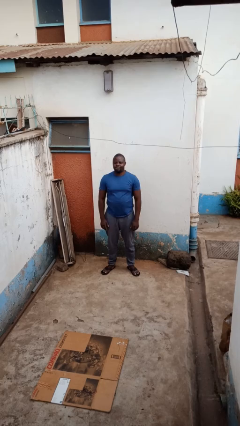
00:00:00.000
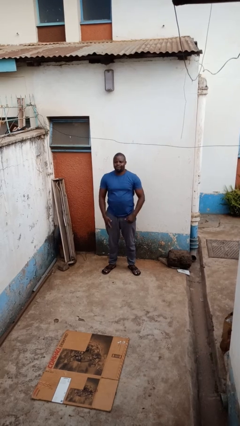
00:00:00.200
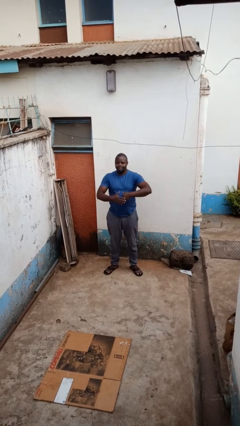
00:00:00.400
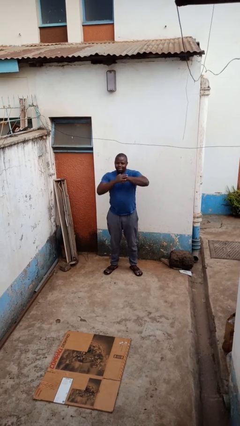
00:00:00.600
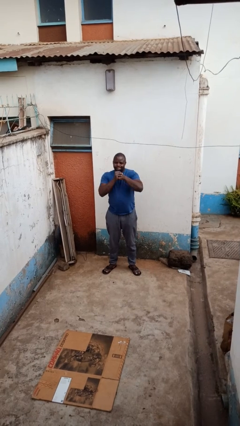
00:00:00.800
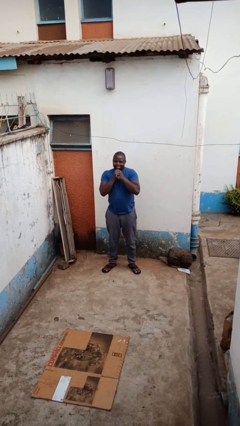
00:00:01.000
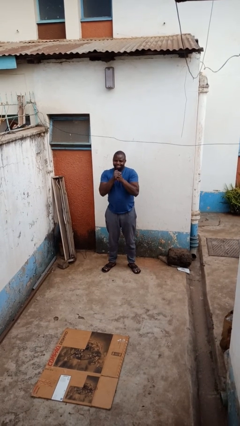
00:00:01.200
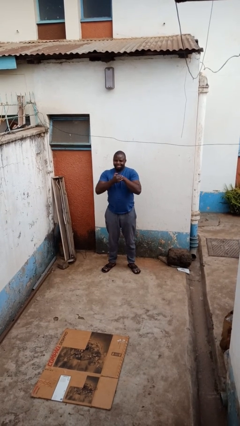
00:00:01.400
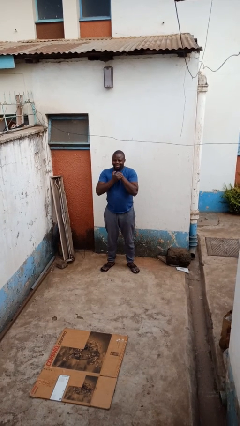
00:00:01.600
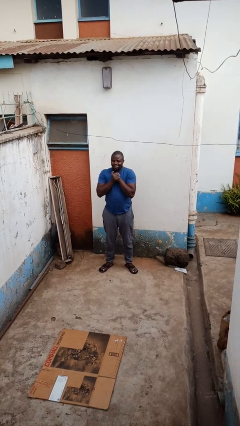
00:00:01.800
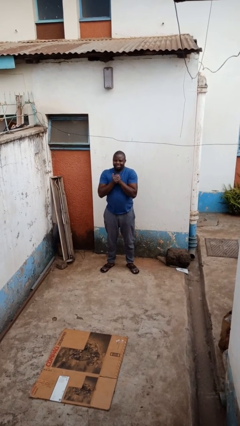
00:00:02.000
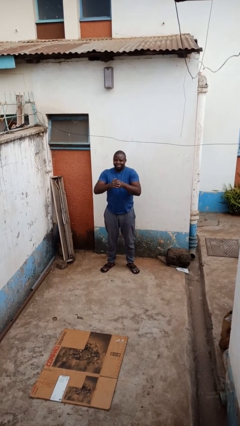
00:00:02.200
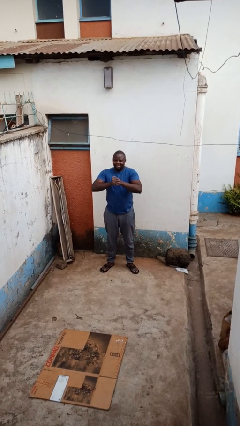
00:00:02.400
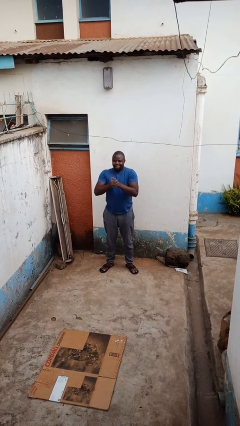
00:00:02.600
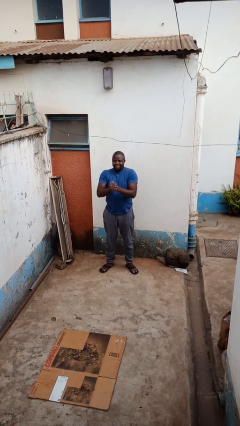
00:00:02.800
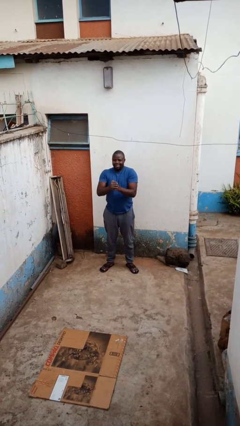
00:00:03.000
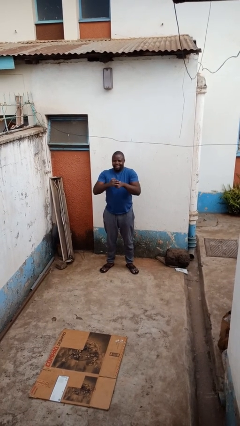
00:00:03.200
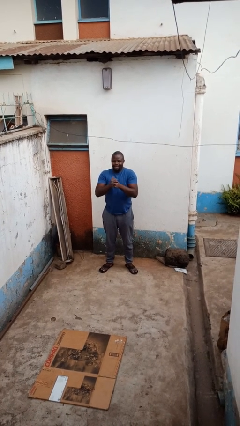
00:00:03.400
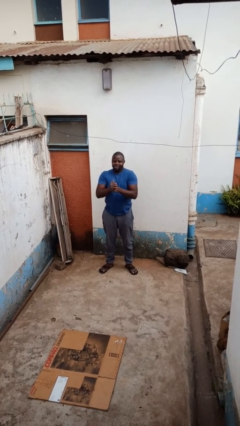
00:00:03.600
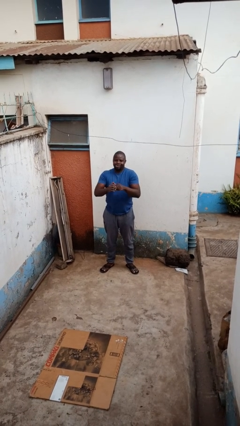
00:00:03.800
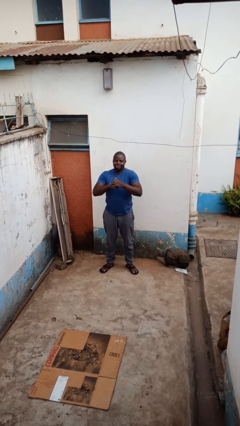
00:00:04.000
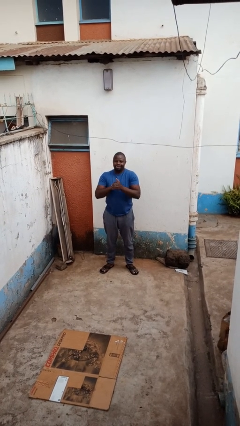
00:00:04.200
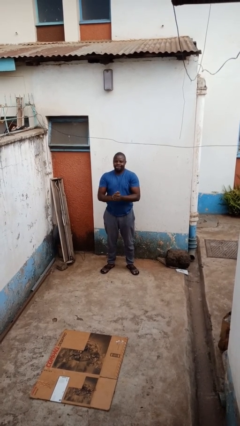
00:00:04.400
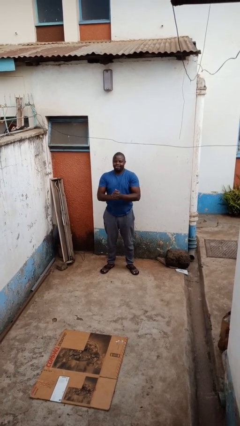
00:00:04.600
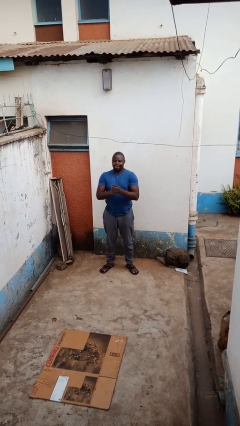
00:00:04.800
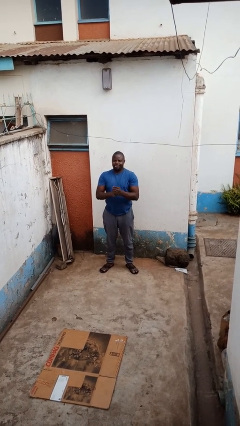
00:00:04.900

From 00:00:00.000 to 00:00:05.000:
person cracks knuckles

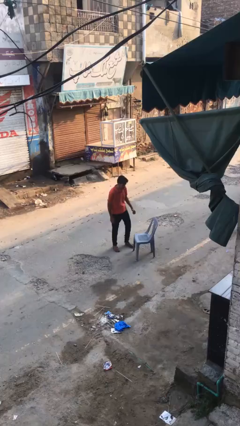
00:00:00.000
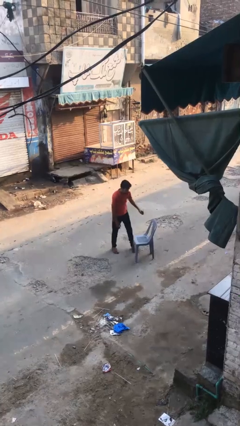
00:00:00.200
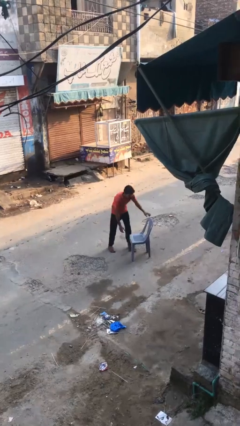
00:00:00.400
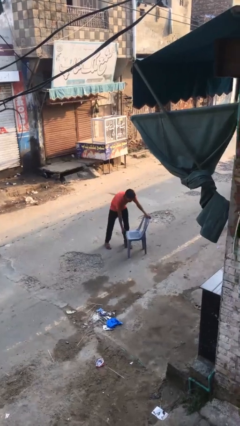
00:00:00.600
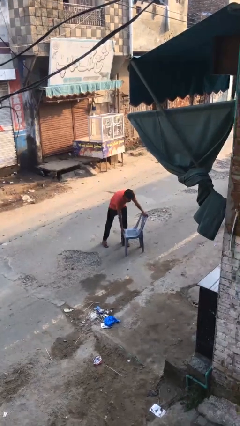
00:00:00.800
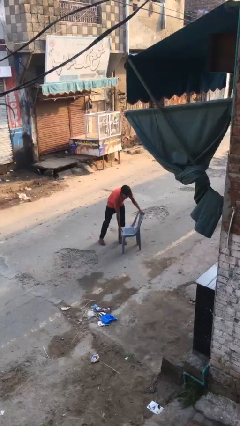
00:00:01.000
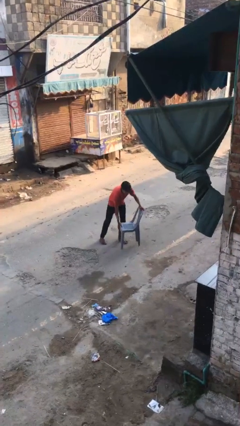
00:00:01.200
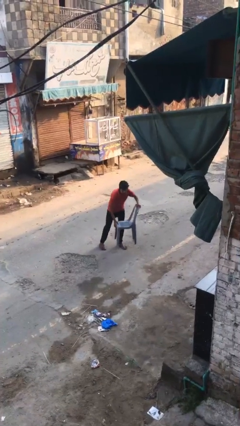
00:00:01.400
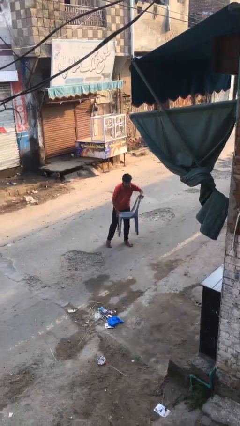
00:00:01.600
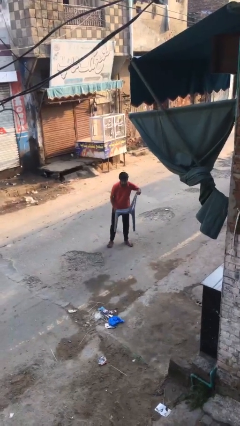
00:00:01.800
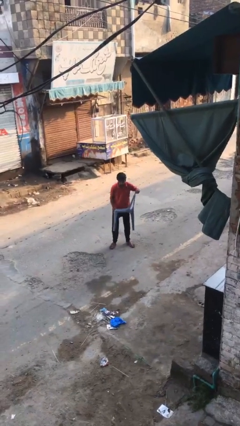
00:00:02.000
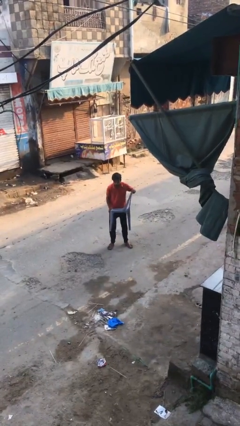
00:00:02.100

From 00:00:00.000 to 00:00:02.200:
person picks up object from floor

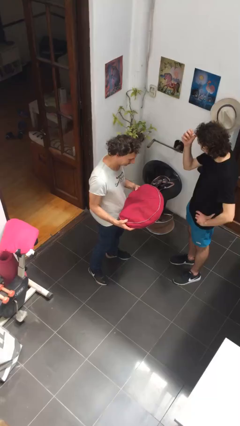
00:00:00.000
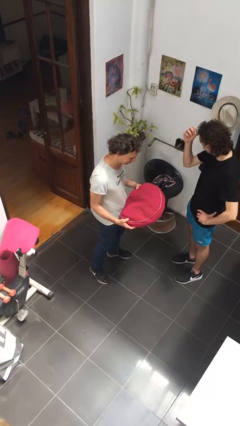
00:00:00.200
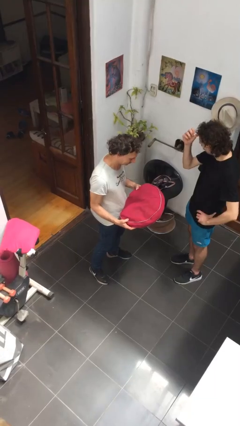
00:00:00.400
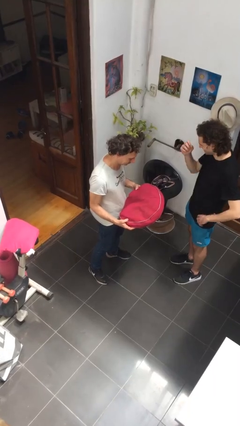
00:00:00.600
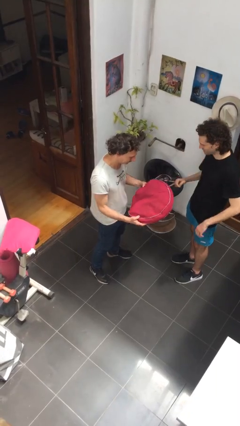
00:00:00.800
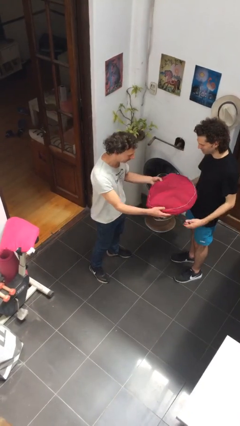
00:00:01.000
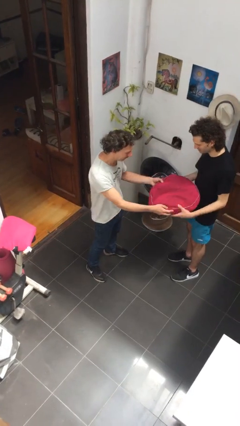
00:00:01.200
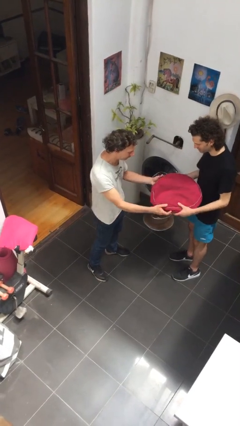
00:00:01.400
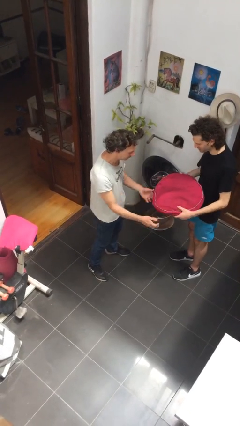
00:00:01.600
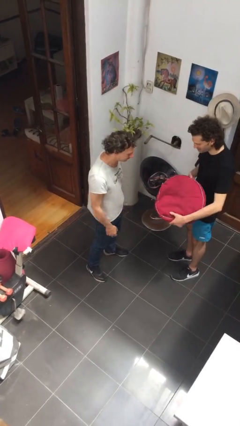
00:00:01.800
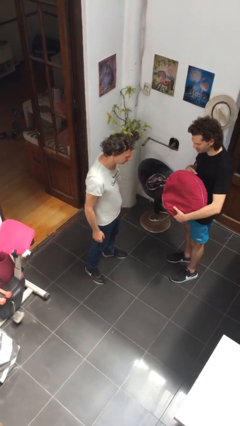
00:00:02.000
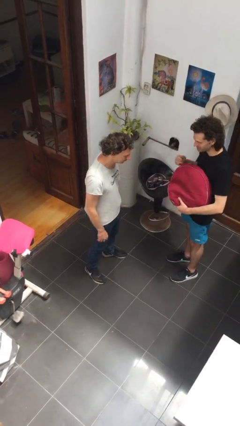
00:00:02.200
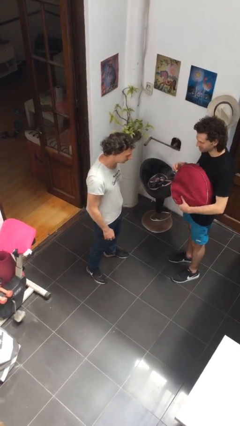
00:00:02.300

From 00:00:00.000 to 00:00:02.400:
person transfers object to person

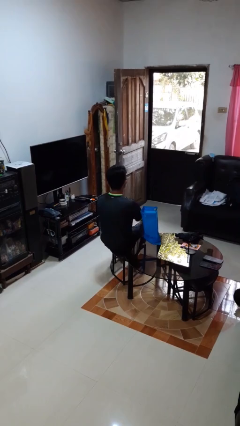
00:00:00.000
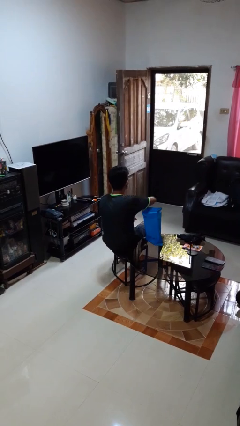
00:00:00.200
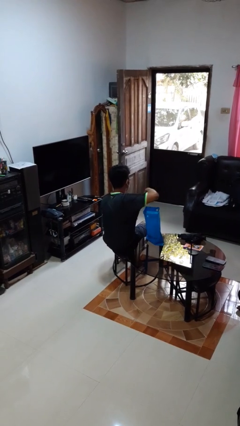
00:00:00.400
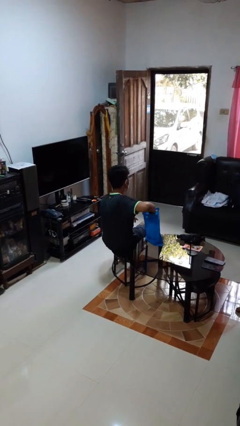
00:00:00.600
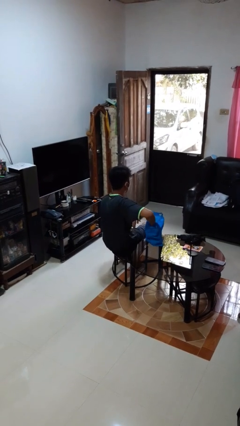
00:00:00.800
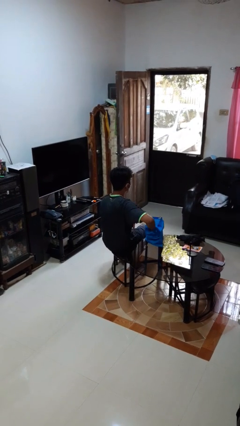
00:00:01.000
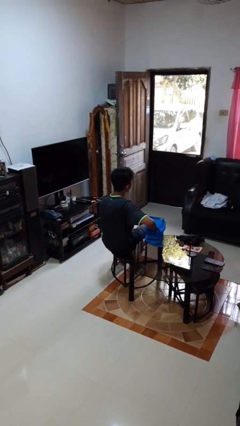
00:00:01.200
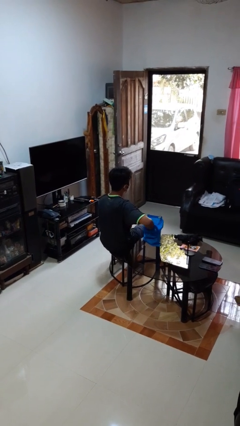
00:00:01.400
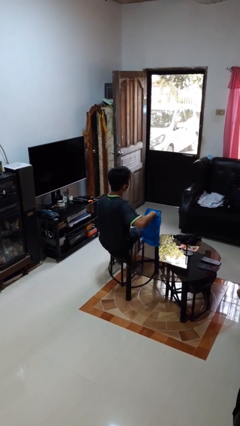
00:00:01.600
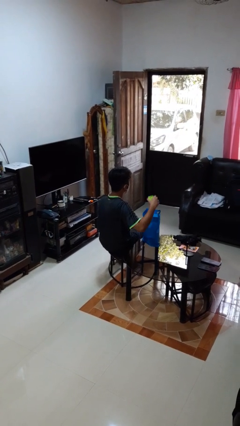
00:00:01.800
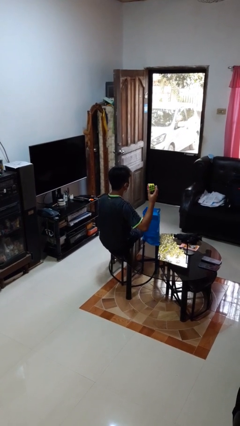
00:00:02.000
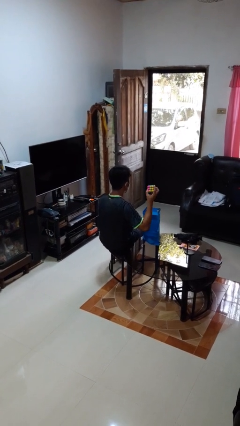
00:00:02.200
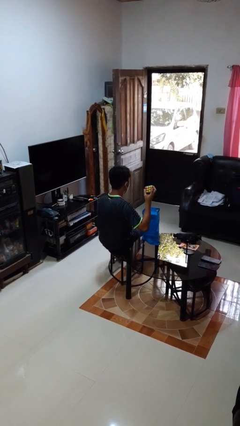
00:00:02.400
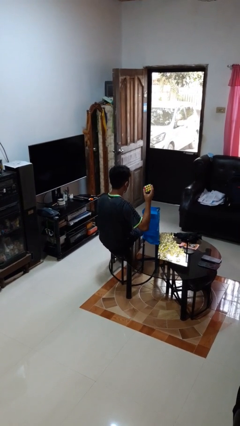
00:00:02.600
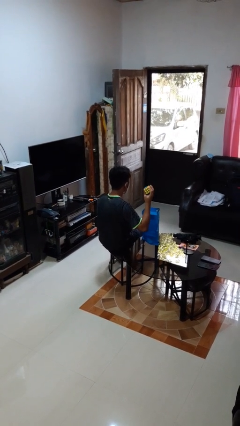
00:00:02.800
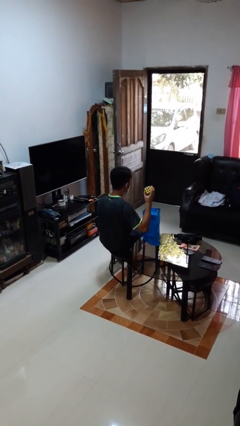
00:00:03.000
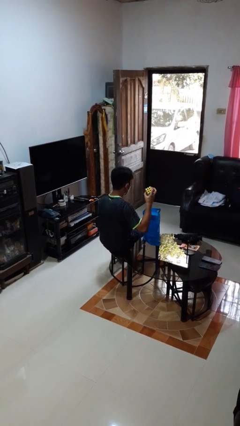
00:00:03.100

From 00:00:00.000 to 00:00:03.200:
person takes object from bag

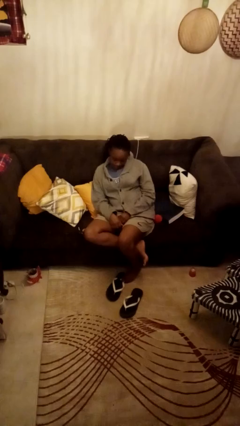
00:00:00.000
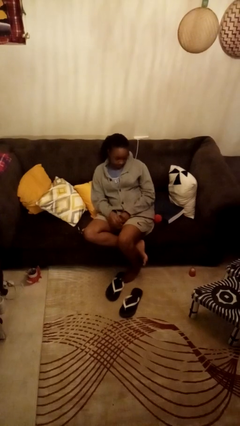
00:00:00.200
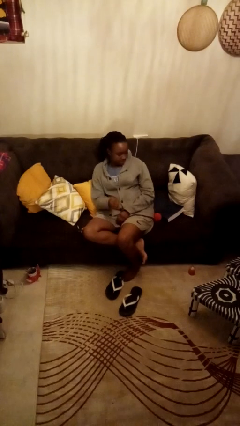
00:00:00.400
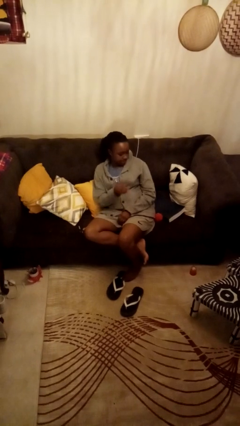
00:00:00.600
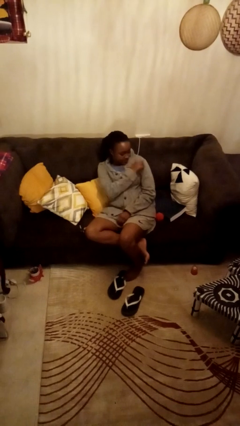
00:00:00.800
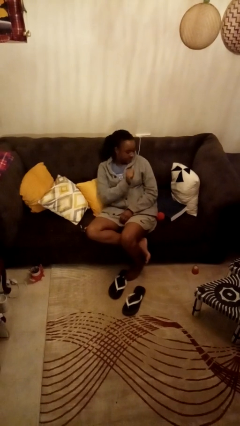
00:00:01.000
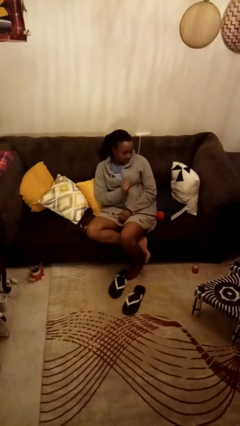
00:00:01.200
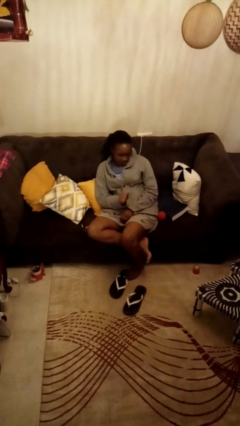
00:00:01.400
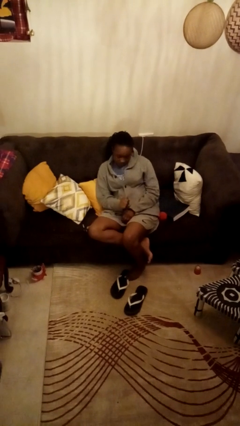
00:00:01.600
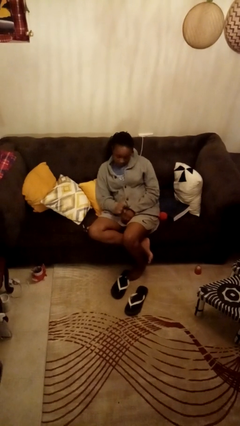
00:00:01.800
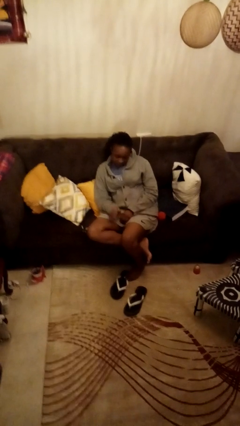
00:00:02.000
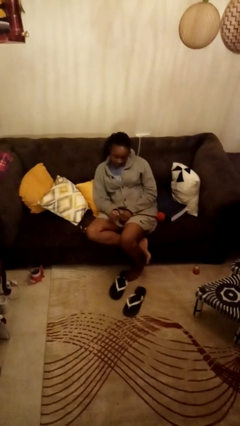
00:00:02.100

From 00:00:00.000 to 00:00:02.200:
person swats bug

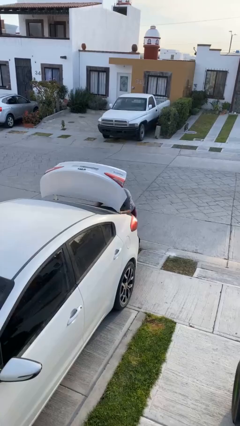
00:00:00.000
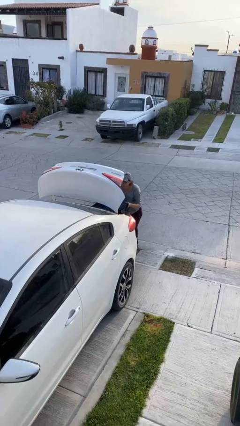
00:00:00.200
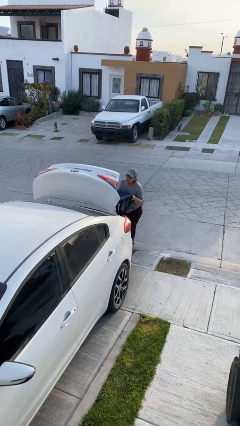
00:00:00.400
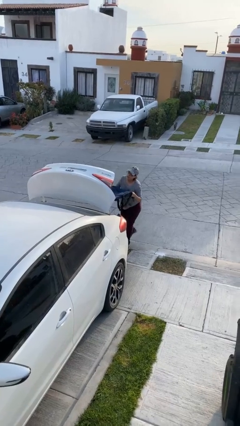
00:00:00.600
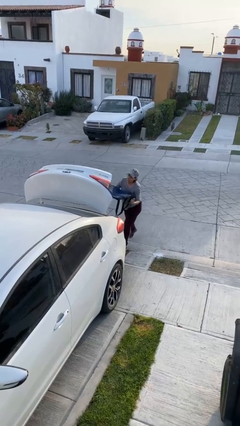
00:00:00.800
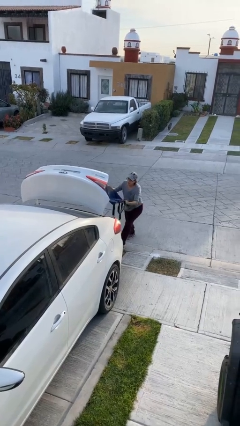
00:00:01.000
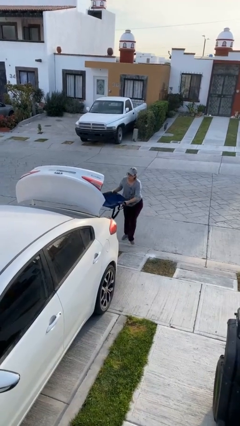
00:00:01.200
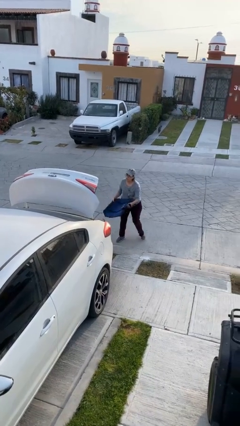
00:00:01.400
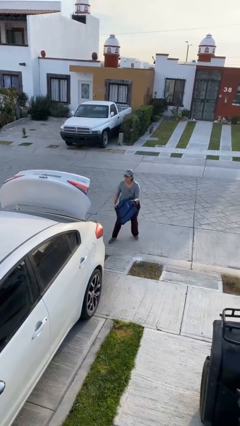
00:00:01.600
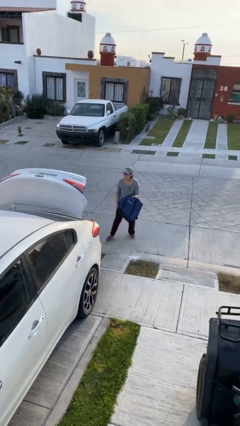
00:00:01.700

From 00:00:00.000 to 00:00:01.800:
person unloads car
